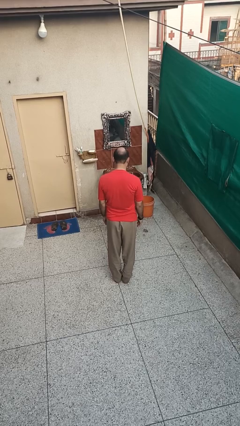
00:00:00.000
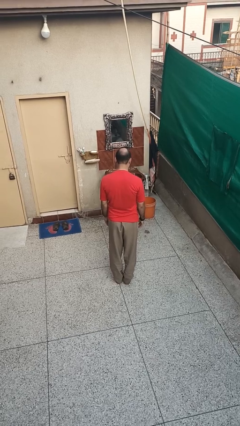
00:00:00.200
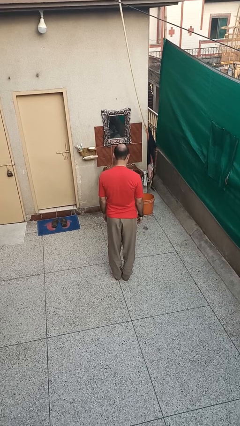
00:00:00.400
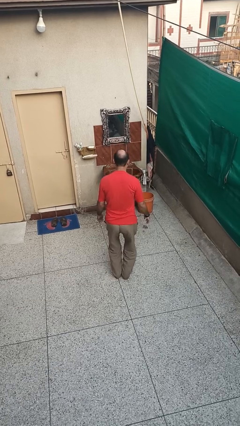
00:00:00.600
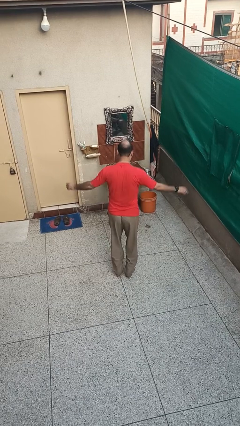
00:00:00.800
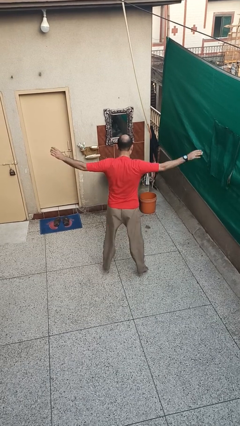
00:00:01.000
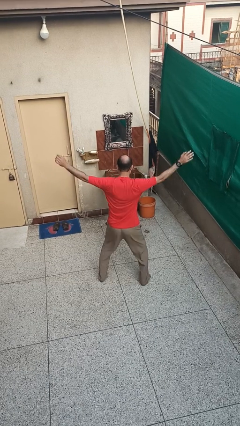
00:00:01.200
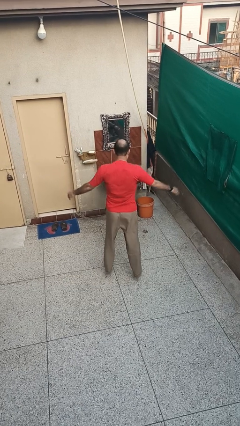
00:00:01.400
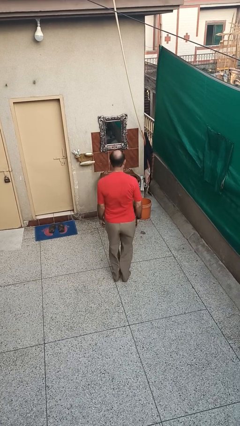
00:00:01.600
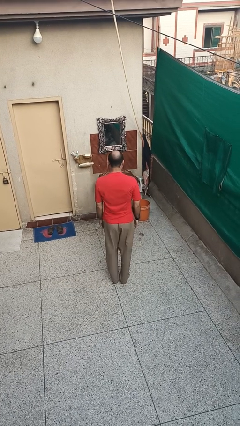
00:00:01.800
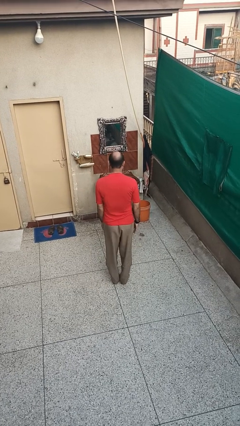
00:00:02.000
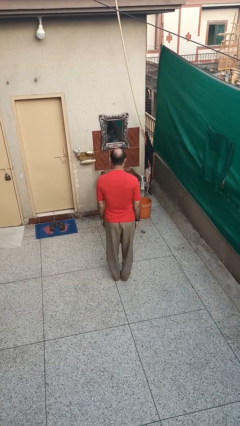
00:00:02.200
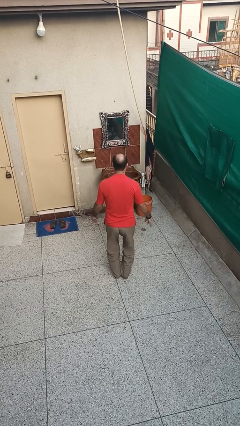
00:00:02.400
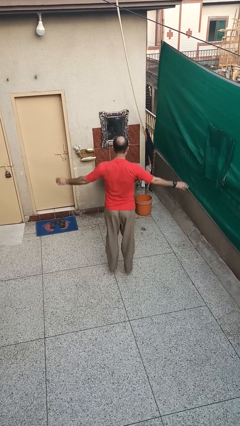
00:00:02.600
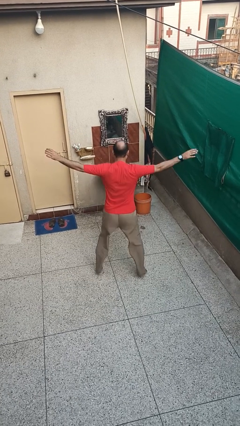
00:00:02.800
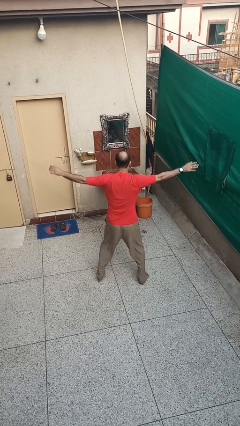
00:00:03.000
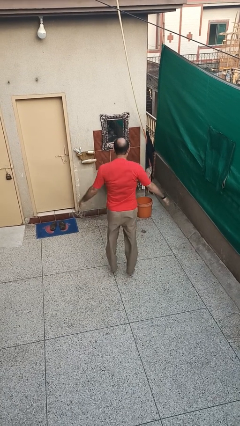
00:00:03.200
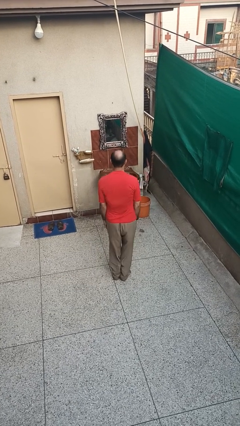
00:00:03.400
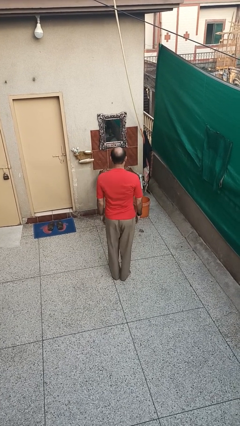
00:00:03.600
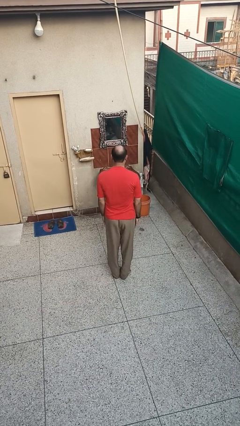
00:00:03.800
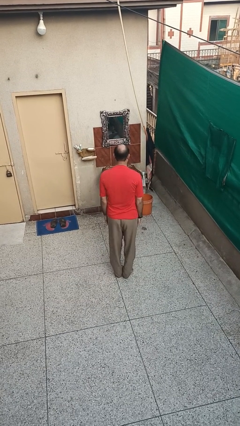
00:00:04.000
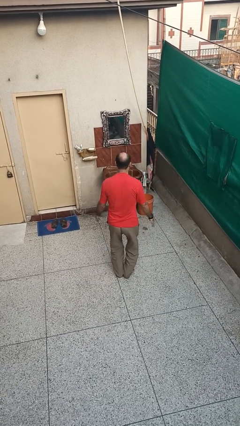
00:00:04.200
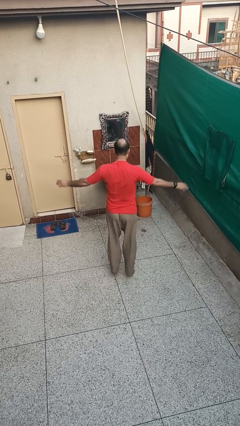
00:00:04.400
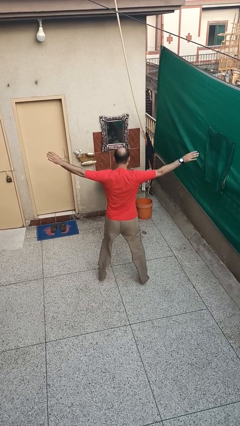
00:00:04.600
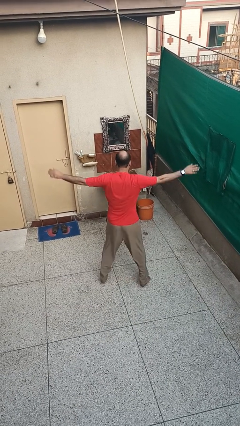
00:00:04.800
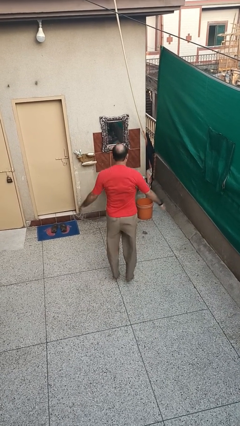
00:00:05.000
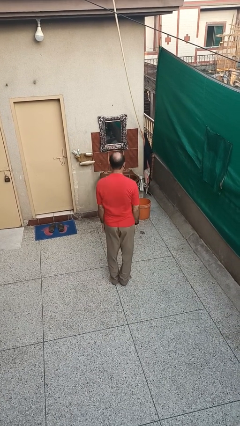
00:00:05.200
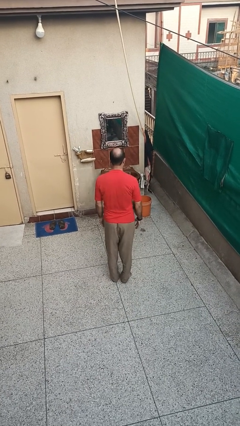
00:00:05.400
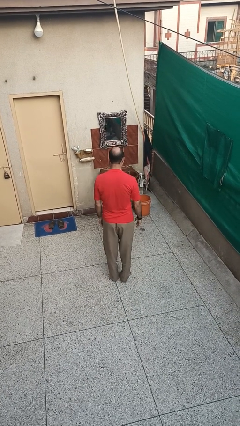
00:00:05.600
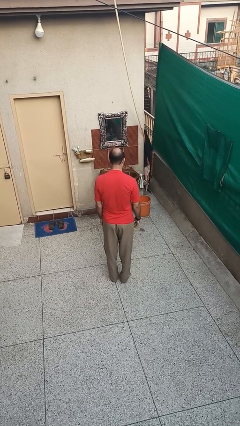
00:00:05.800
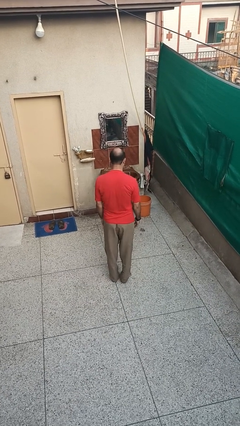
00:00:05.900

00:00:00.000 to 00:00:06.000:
person exercises with jumping jacks

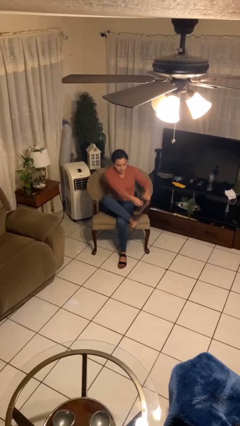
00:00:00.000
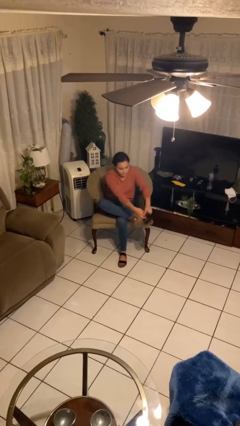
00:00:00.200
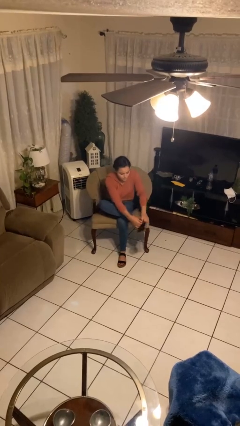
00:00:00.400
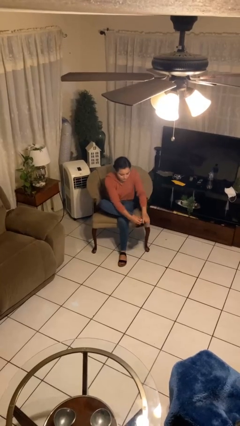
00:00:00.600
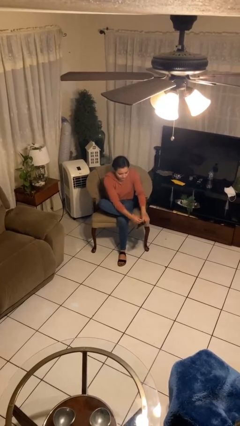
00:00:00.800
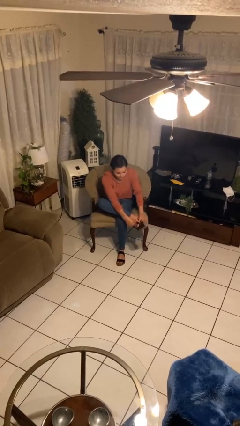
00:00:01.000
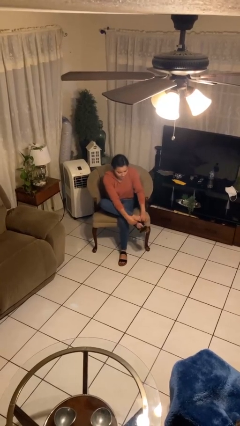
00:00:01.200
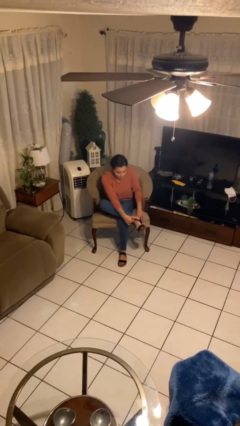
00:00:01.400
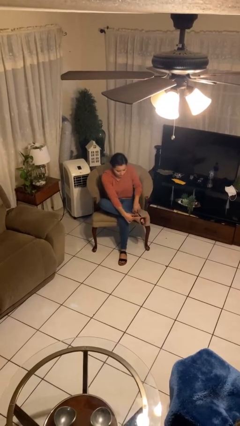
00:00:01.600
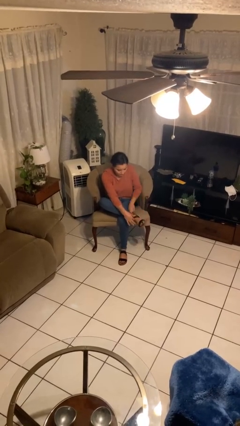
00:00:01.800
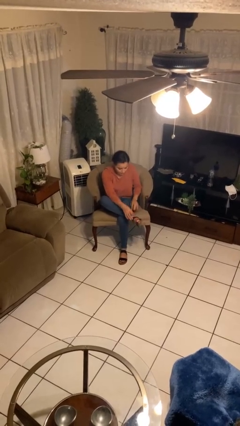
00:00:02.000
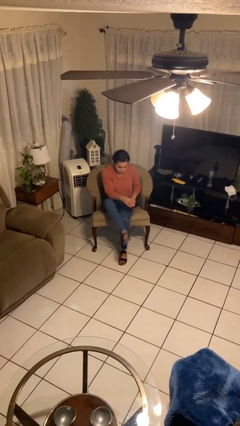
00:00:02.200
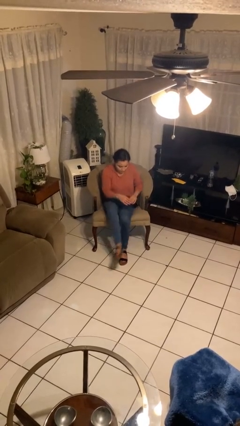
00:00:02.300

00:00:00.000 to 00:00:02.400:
person puts on shoes

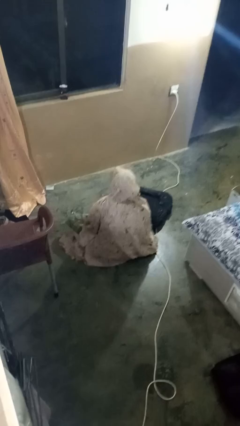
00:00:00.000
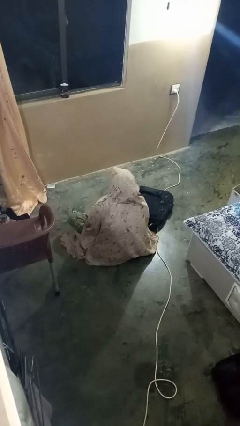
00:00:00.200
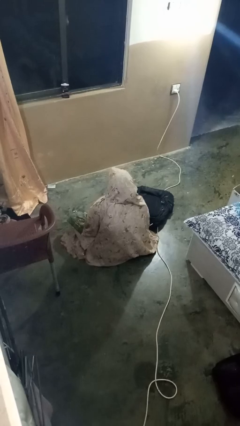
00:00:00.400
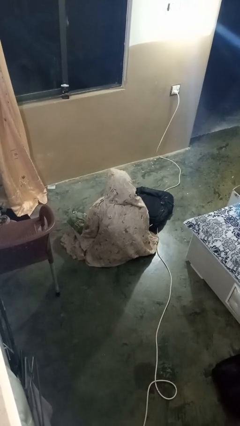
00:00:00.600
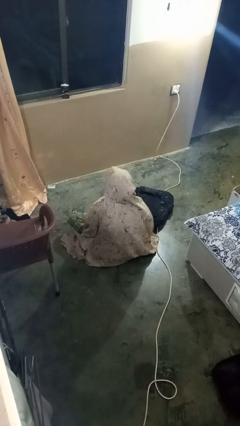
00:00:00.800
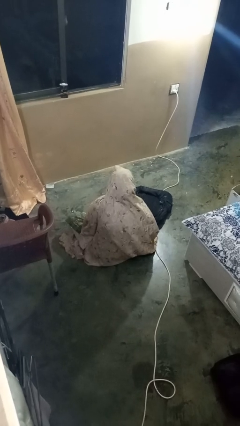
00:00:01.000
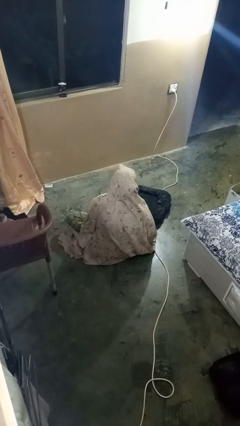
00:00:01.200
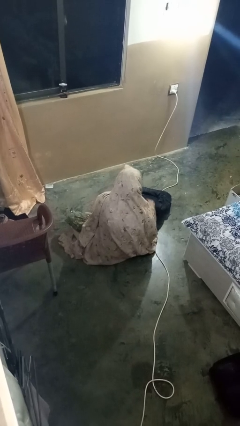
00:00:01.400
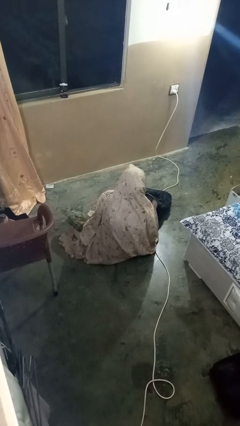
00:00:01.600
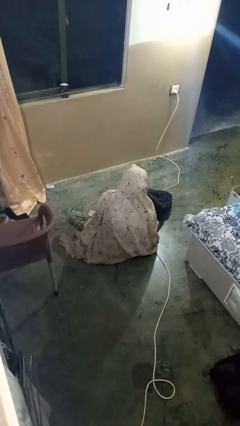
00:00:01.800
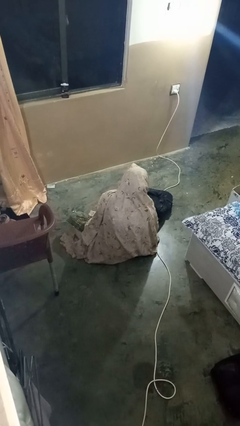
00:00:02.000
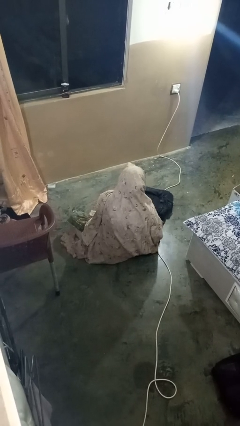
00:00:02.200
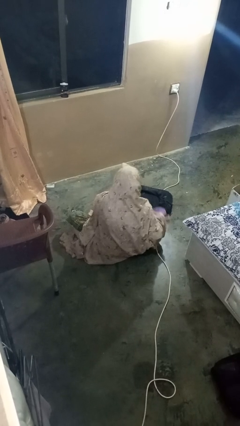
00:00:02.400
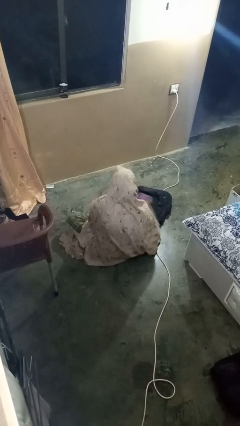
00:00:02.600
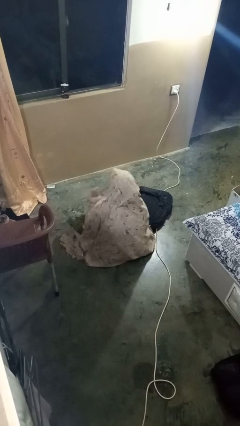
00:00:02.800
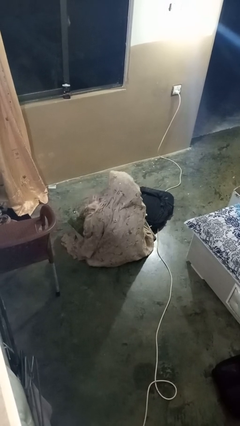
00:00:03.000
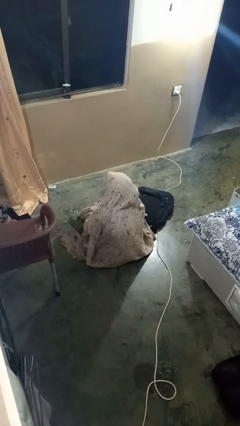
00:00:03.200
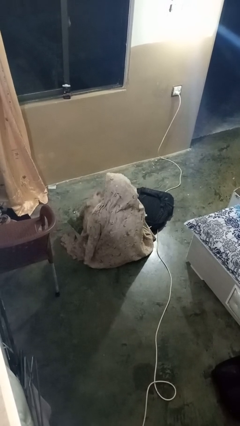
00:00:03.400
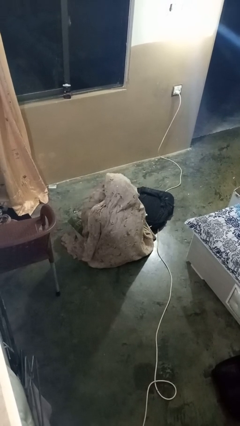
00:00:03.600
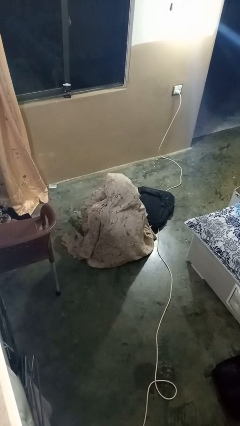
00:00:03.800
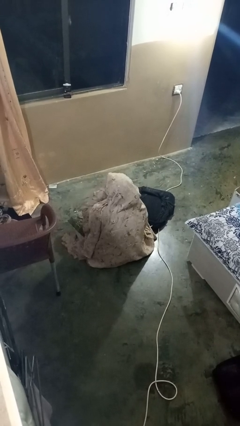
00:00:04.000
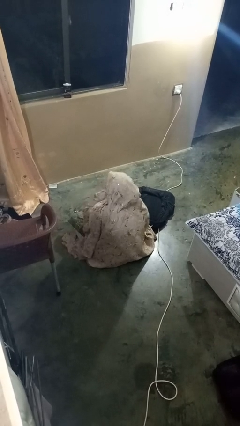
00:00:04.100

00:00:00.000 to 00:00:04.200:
person eats snack from bag

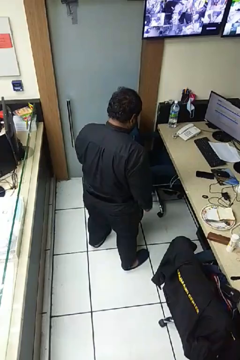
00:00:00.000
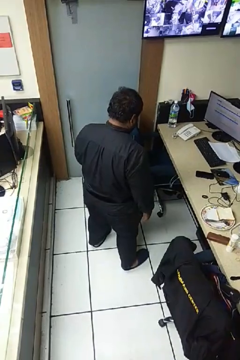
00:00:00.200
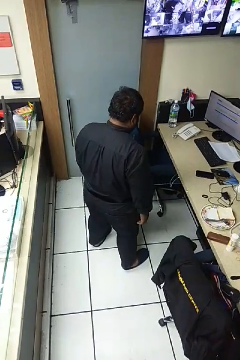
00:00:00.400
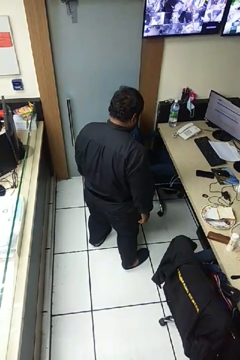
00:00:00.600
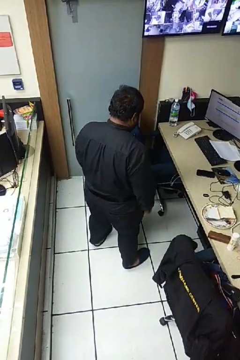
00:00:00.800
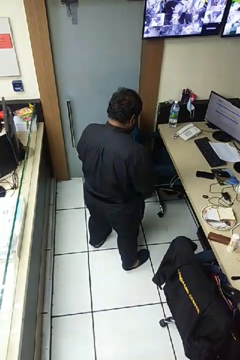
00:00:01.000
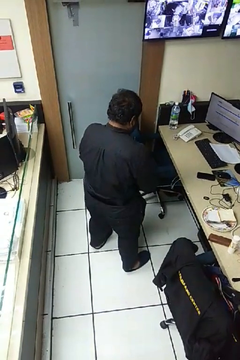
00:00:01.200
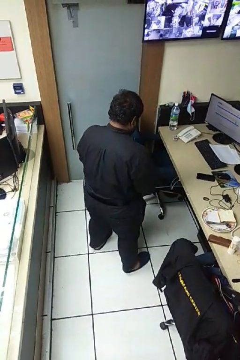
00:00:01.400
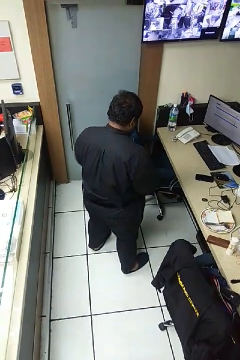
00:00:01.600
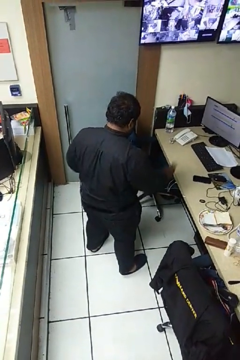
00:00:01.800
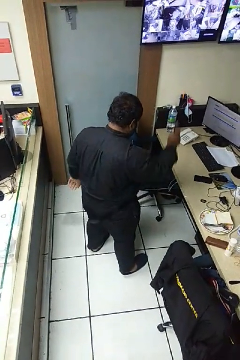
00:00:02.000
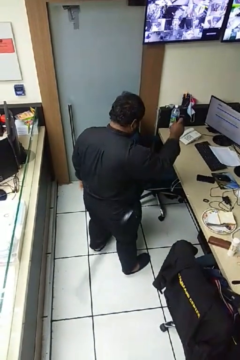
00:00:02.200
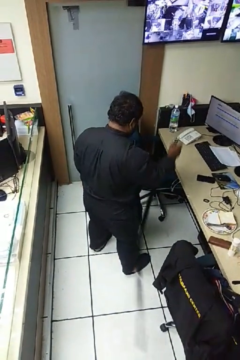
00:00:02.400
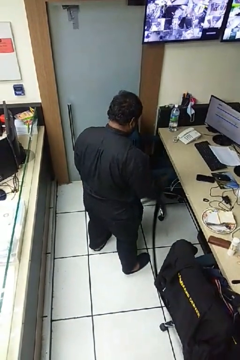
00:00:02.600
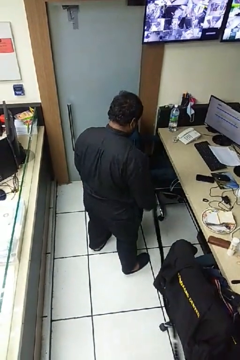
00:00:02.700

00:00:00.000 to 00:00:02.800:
person takes off belt

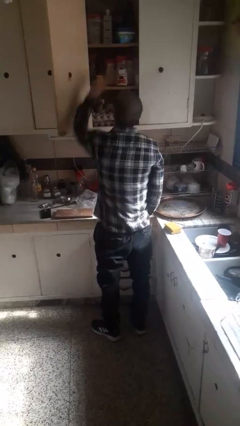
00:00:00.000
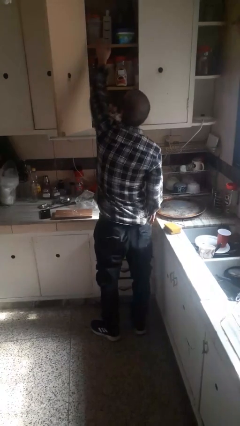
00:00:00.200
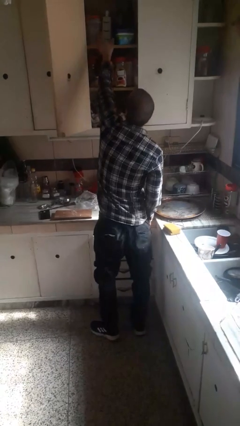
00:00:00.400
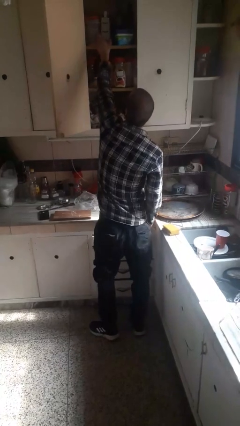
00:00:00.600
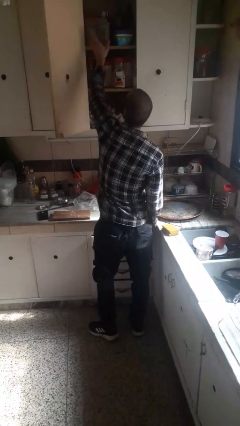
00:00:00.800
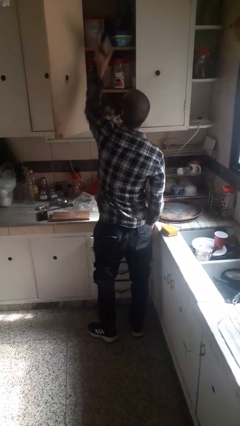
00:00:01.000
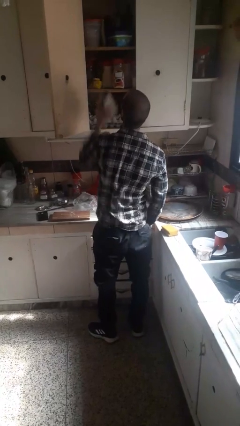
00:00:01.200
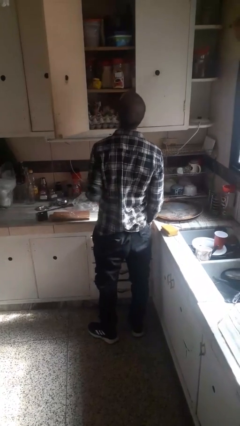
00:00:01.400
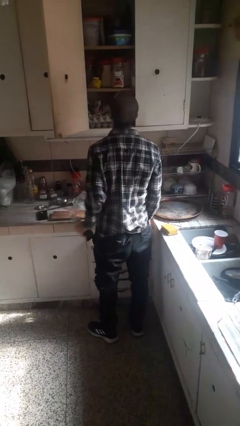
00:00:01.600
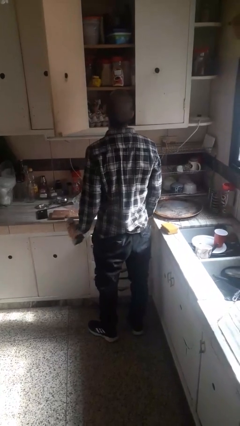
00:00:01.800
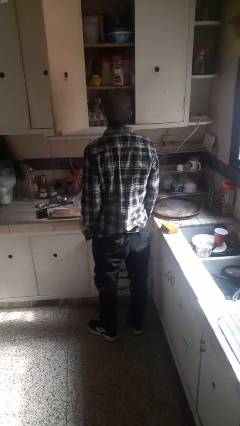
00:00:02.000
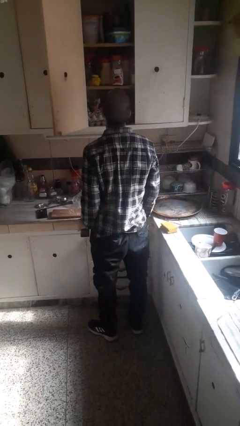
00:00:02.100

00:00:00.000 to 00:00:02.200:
person puts down object into cabinet
